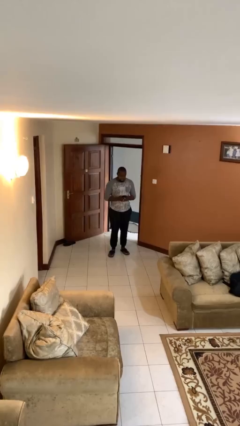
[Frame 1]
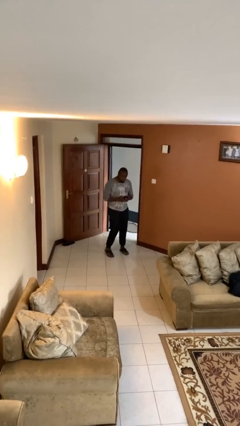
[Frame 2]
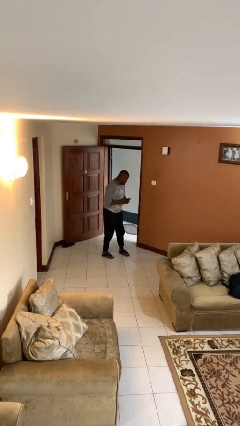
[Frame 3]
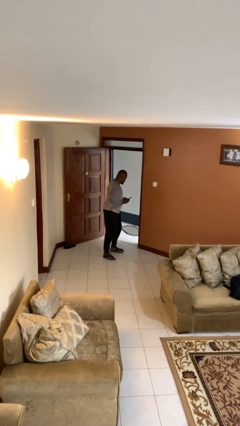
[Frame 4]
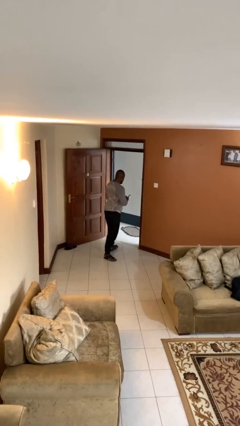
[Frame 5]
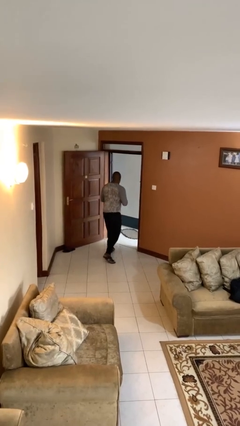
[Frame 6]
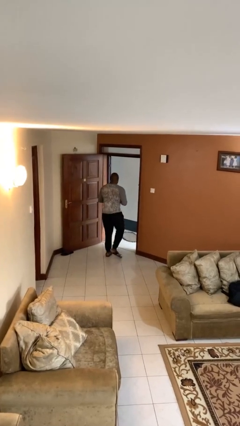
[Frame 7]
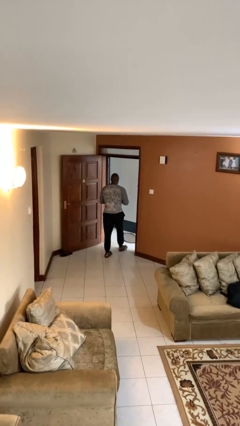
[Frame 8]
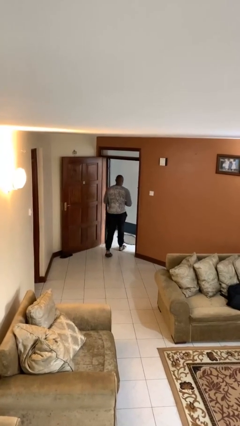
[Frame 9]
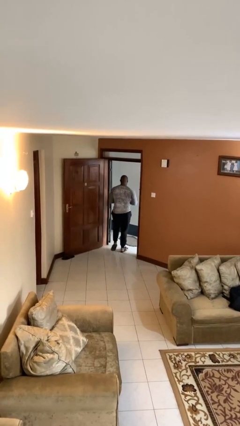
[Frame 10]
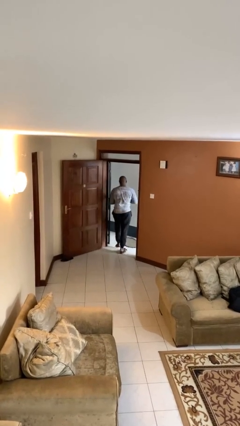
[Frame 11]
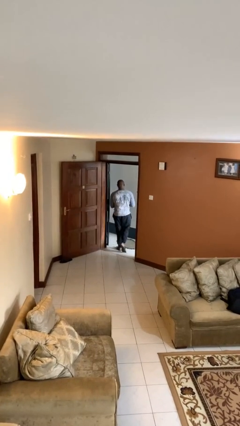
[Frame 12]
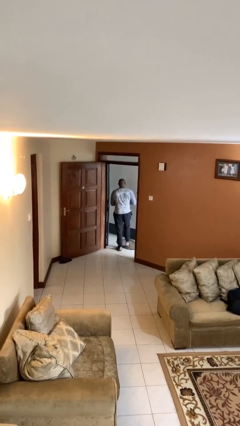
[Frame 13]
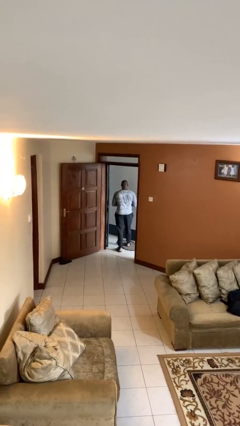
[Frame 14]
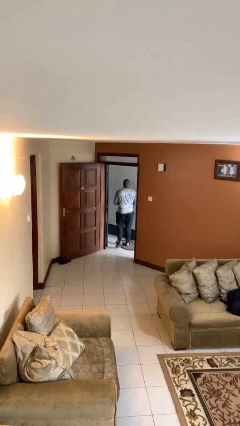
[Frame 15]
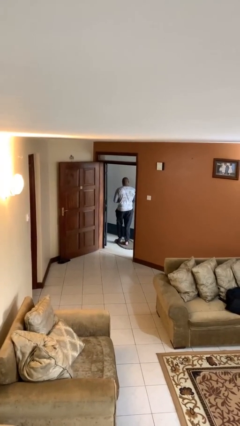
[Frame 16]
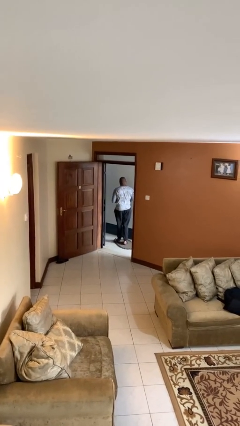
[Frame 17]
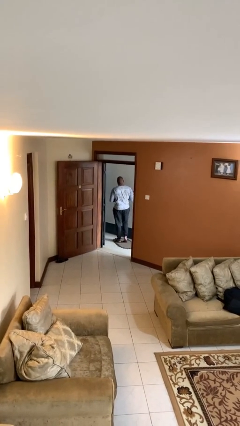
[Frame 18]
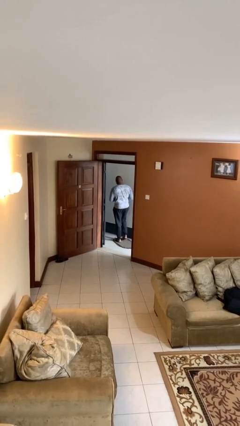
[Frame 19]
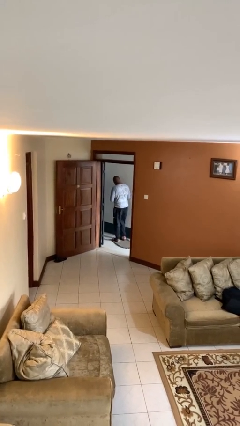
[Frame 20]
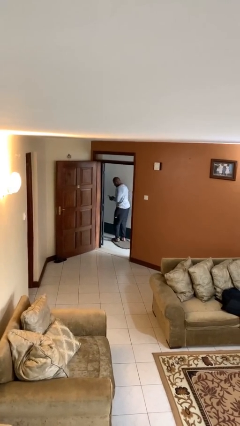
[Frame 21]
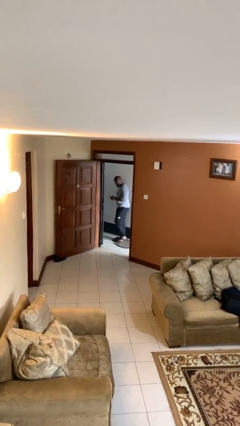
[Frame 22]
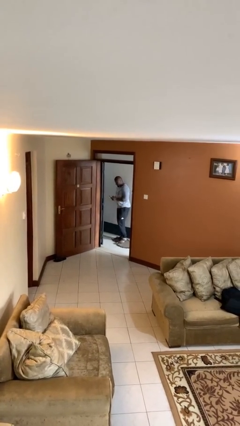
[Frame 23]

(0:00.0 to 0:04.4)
person exits scene through structure

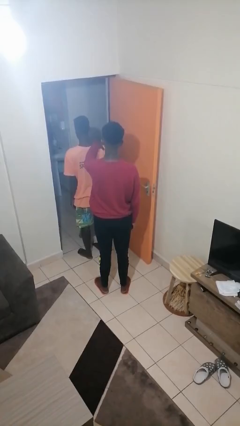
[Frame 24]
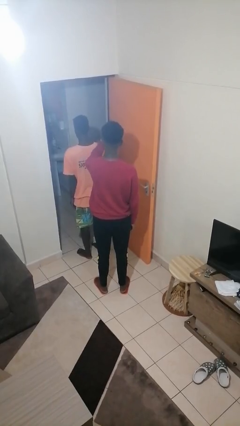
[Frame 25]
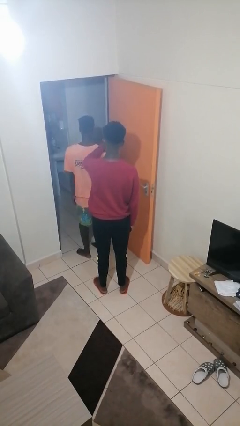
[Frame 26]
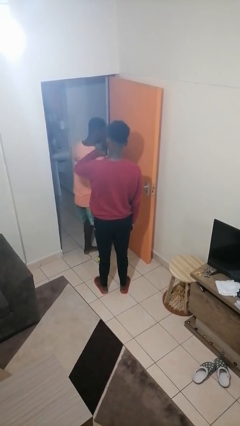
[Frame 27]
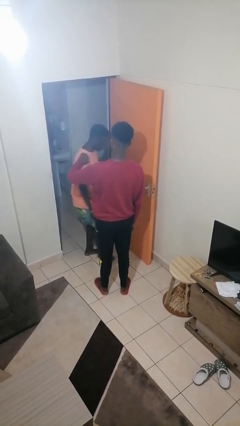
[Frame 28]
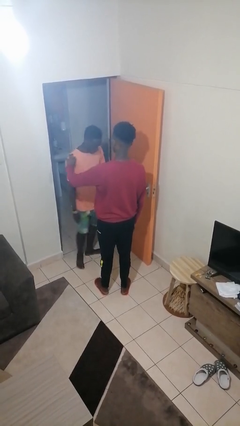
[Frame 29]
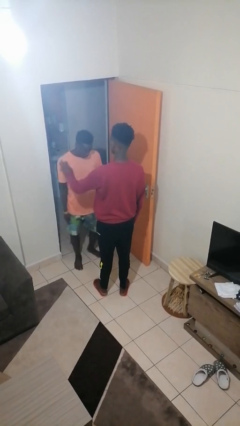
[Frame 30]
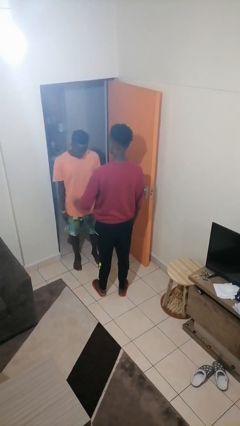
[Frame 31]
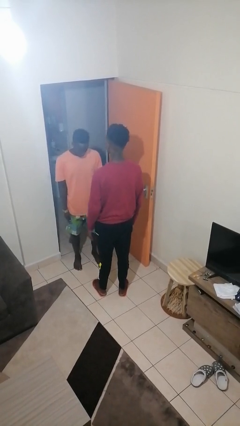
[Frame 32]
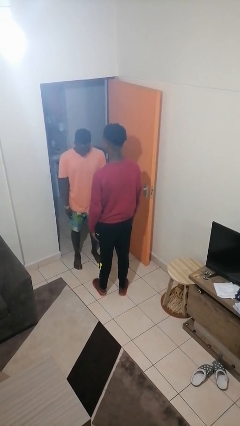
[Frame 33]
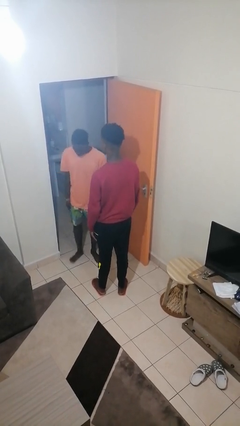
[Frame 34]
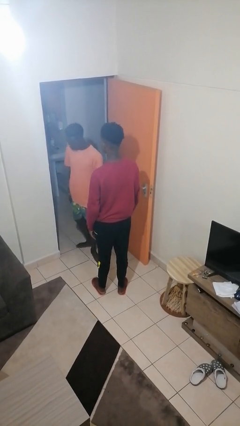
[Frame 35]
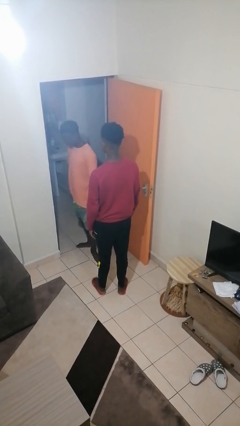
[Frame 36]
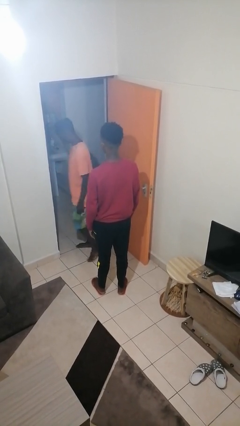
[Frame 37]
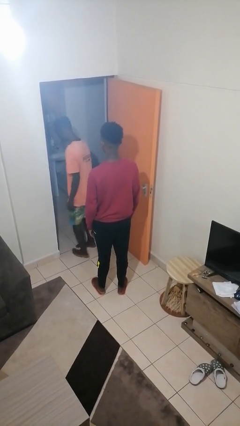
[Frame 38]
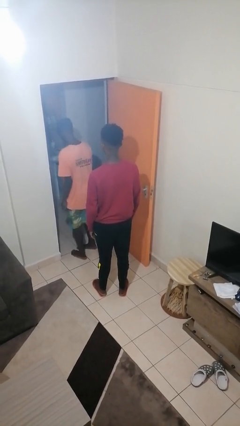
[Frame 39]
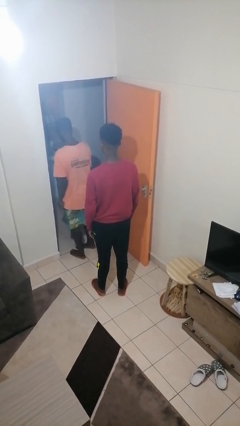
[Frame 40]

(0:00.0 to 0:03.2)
person spins person around

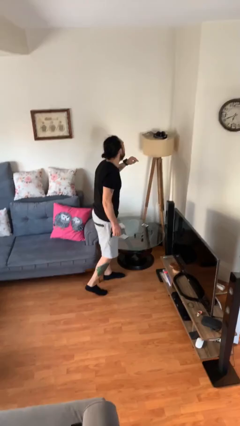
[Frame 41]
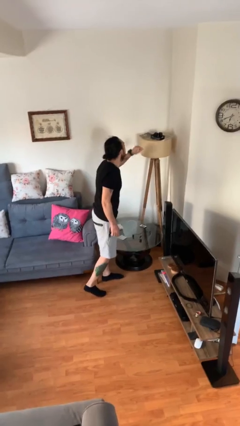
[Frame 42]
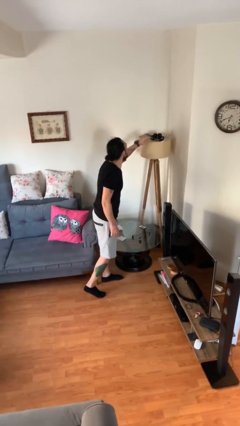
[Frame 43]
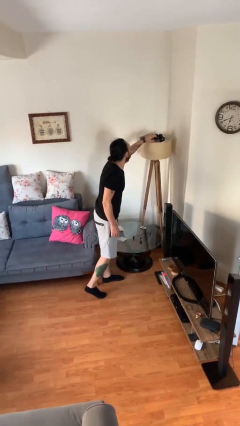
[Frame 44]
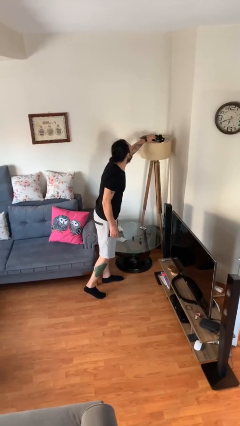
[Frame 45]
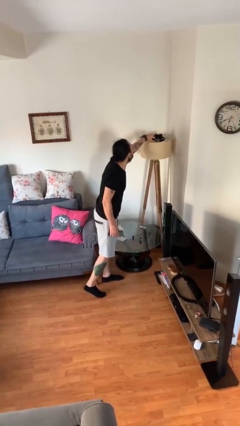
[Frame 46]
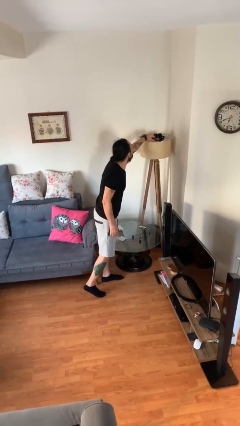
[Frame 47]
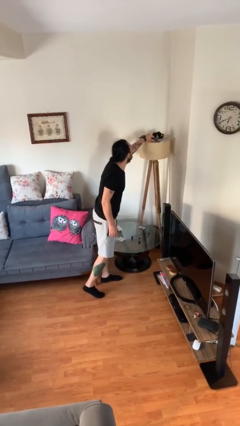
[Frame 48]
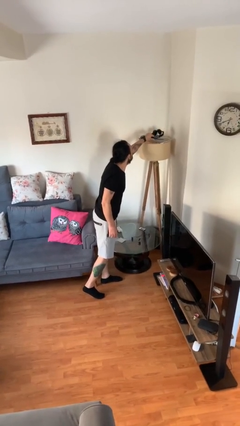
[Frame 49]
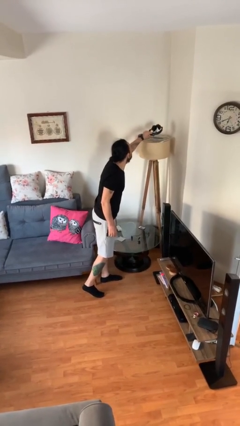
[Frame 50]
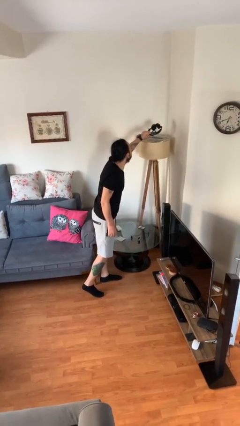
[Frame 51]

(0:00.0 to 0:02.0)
person picks up object from shelf

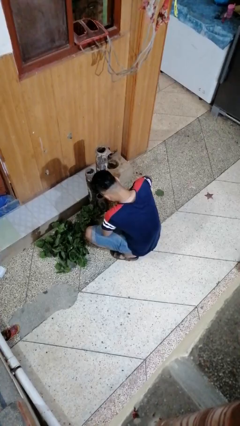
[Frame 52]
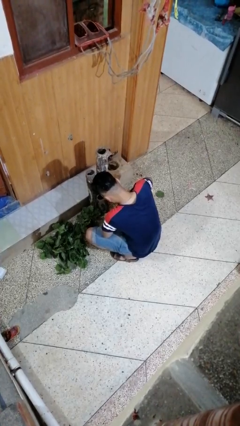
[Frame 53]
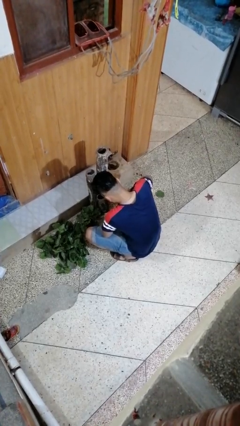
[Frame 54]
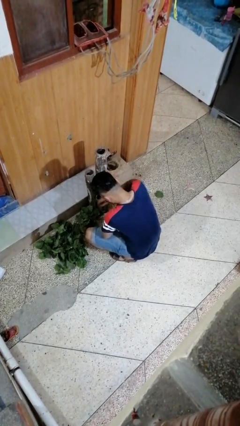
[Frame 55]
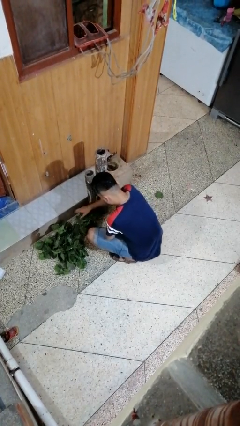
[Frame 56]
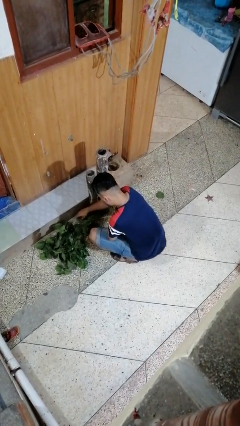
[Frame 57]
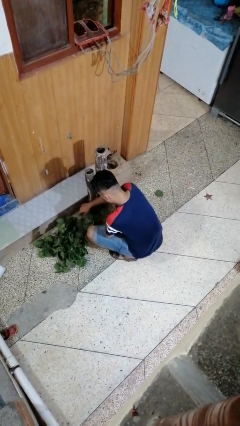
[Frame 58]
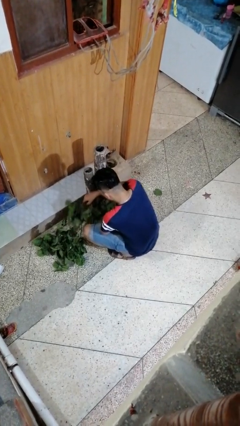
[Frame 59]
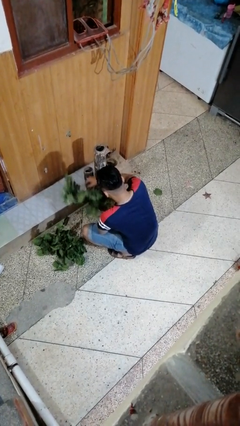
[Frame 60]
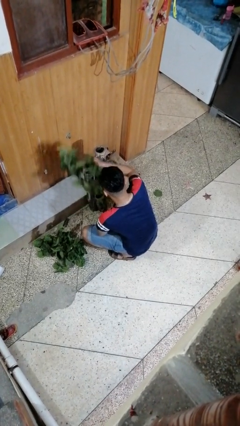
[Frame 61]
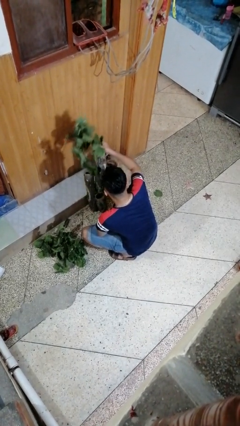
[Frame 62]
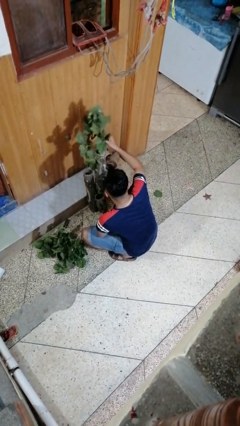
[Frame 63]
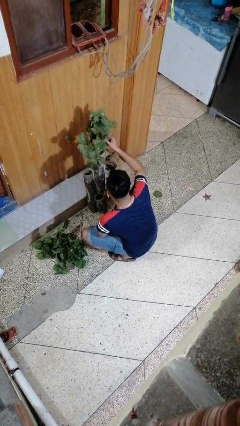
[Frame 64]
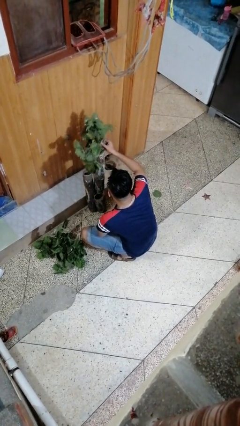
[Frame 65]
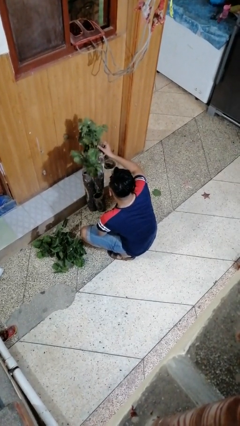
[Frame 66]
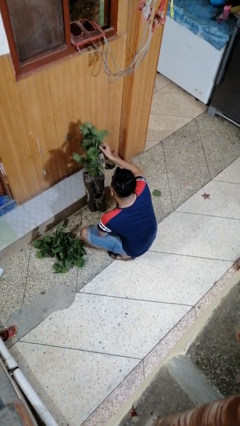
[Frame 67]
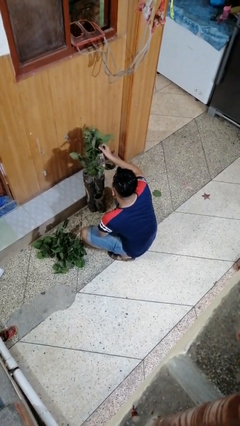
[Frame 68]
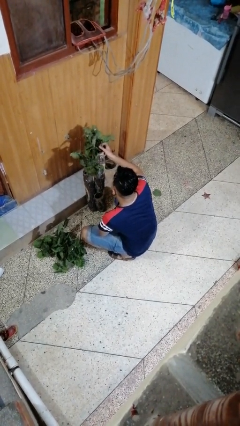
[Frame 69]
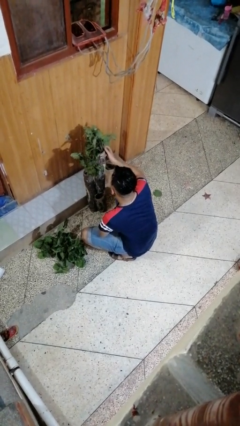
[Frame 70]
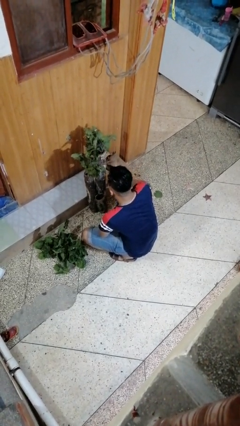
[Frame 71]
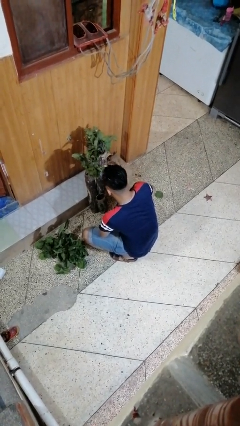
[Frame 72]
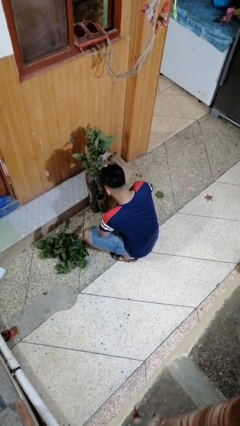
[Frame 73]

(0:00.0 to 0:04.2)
person arranges flowers in vase

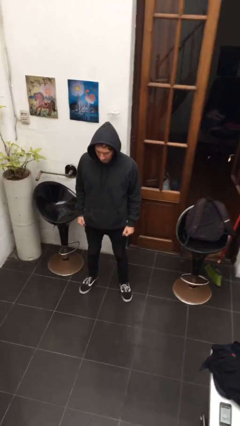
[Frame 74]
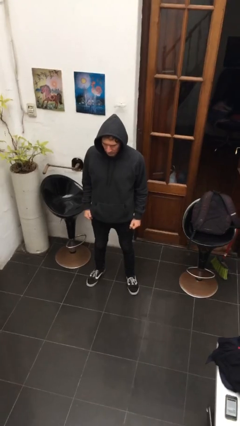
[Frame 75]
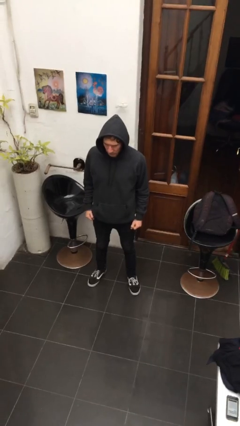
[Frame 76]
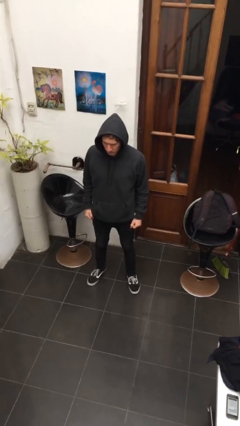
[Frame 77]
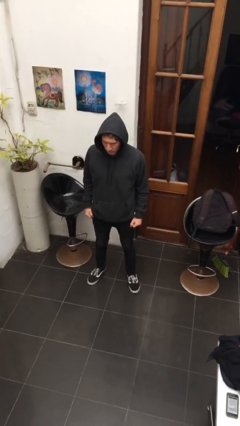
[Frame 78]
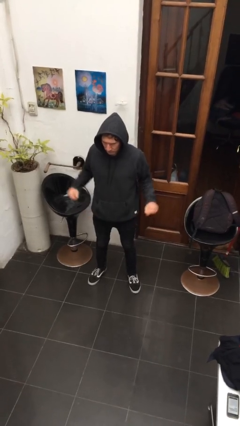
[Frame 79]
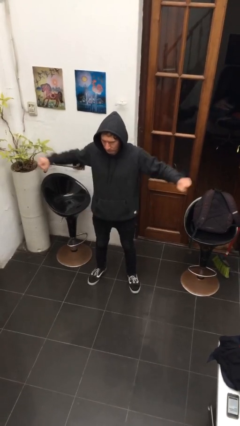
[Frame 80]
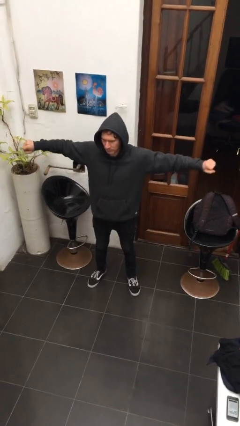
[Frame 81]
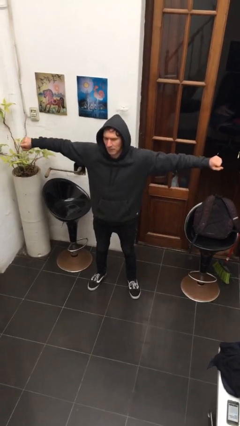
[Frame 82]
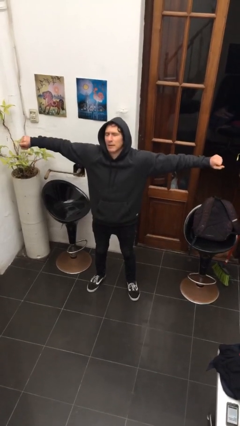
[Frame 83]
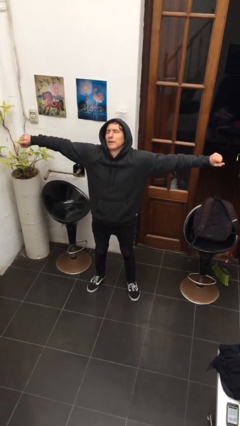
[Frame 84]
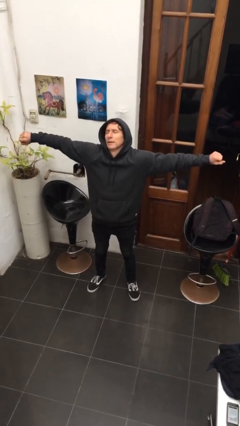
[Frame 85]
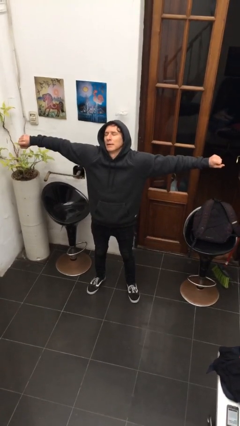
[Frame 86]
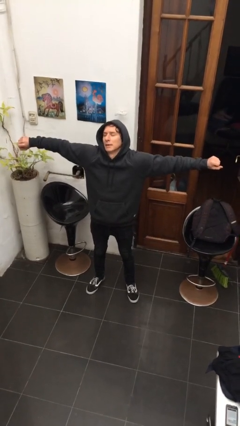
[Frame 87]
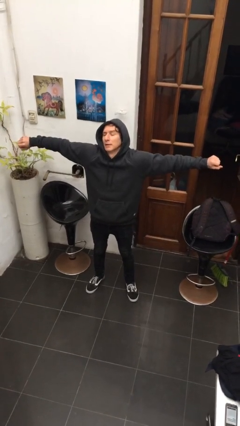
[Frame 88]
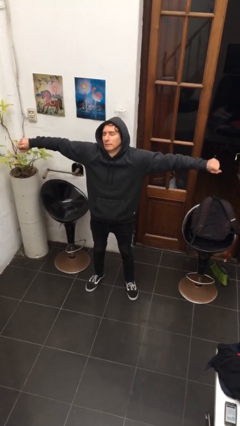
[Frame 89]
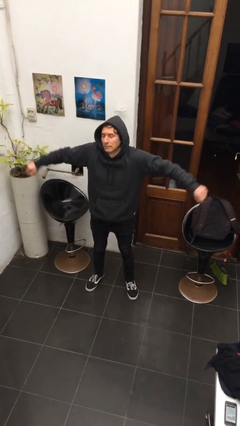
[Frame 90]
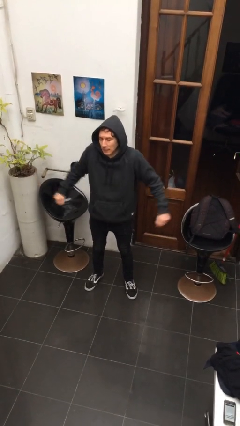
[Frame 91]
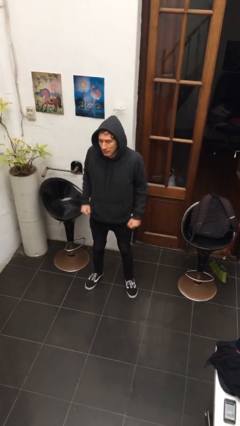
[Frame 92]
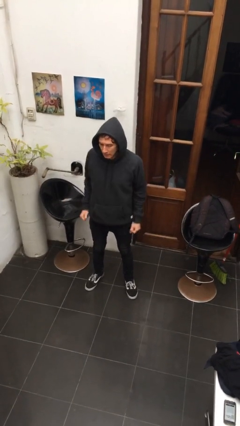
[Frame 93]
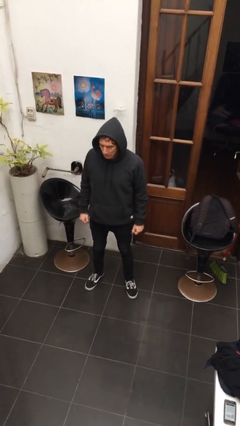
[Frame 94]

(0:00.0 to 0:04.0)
person stretches arms to side
